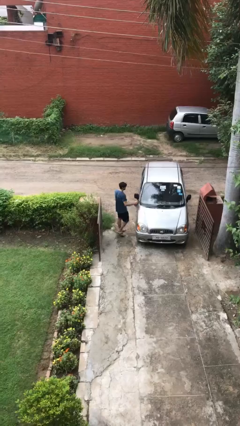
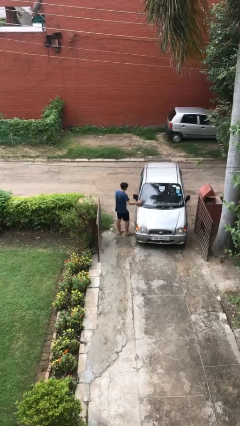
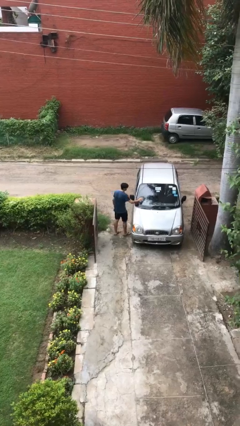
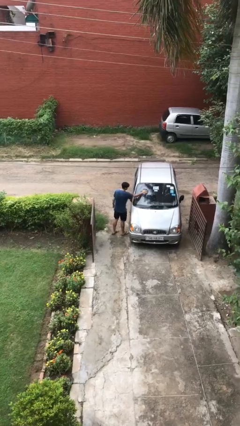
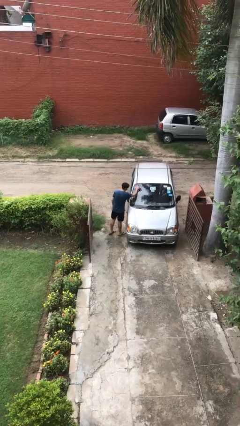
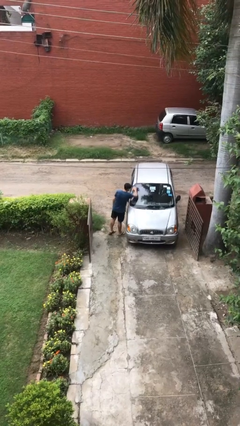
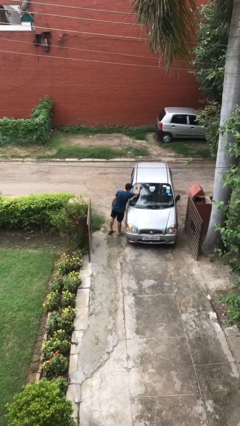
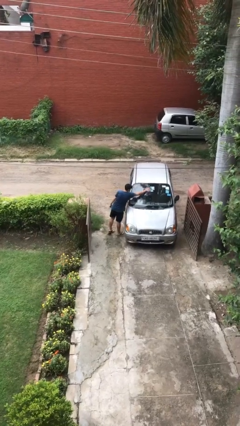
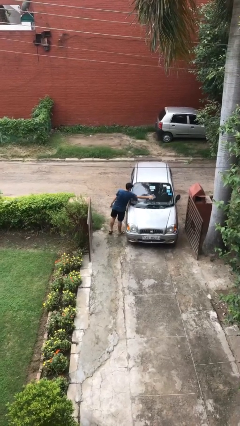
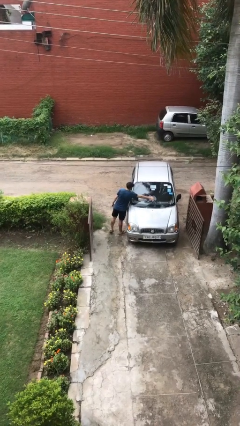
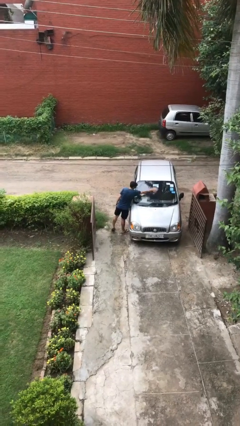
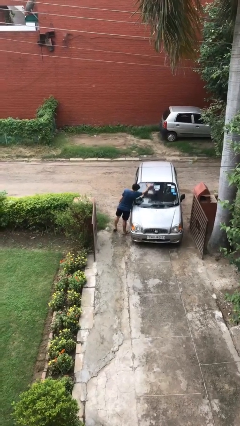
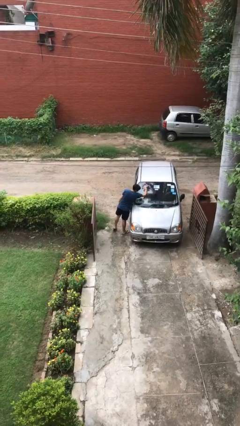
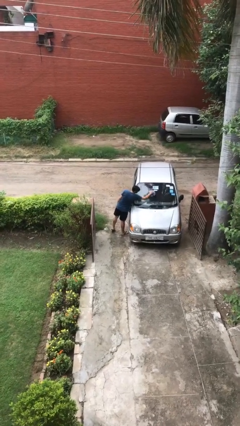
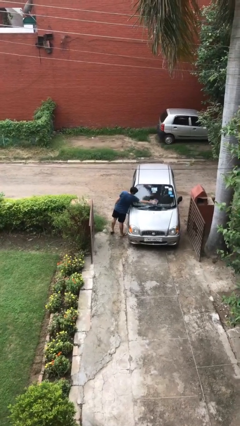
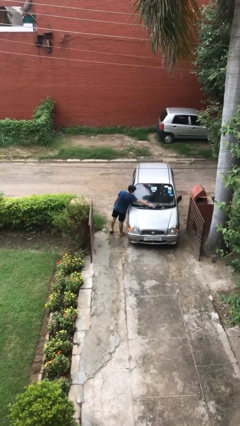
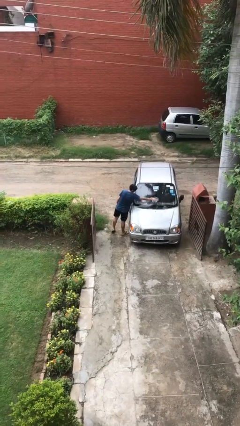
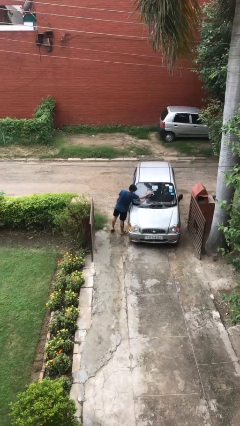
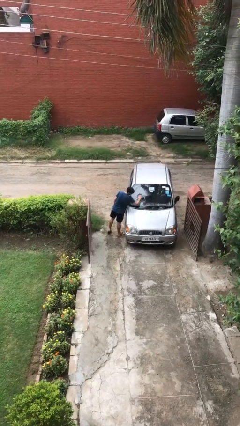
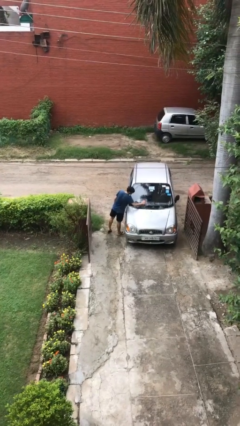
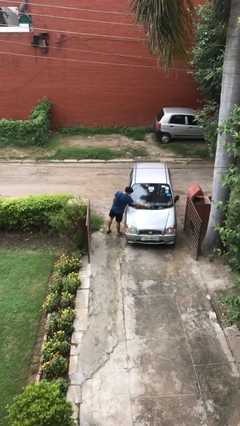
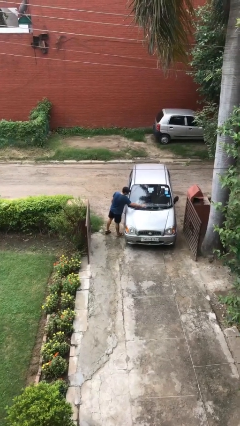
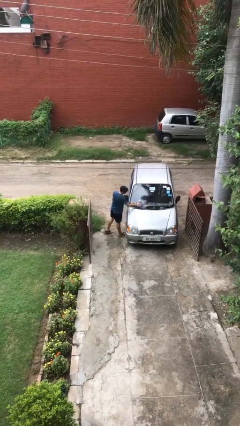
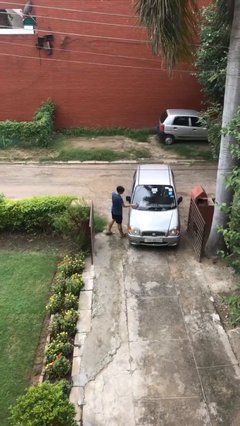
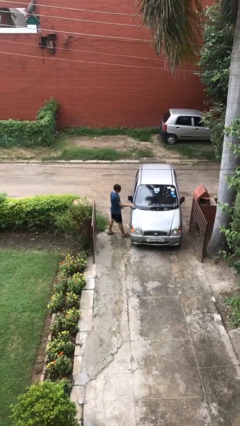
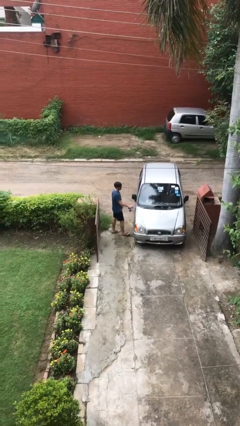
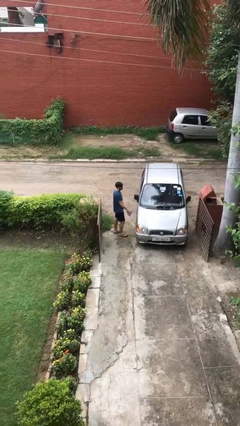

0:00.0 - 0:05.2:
person polishes car with rag

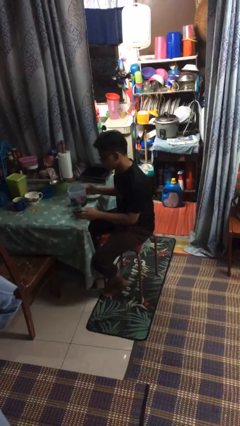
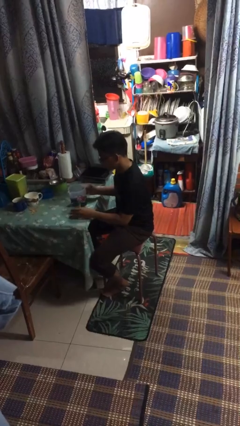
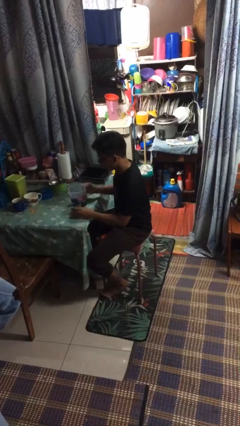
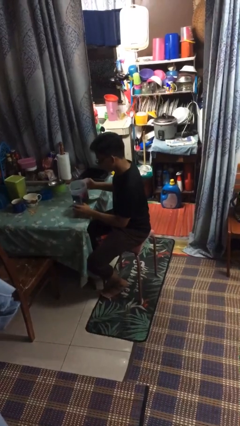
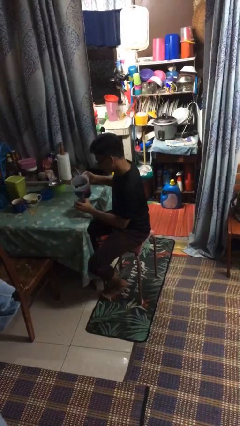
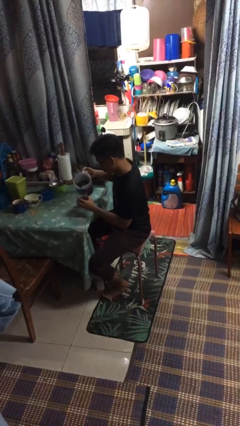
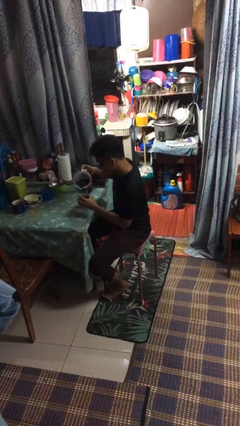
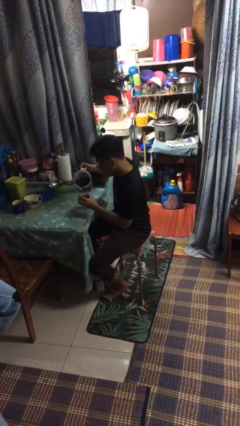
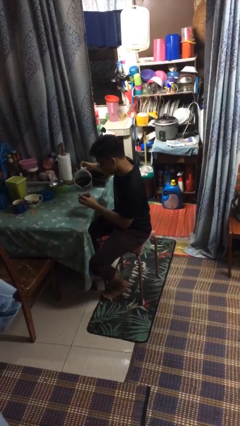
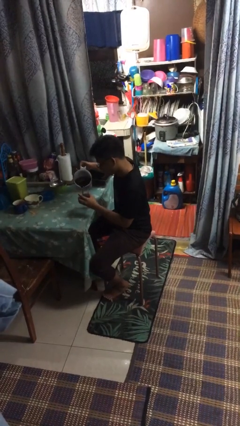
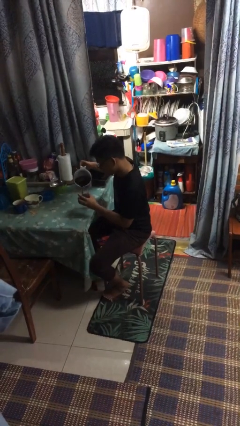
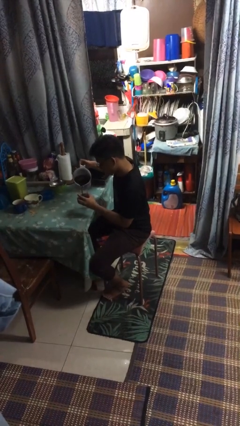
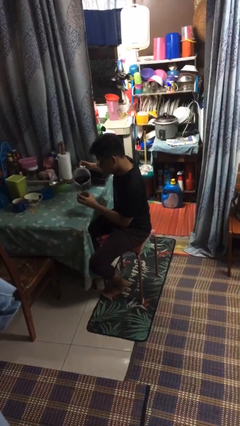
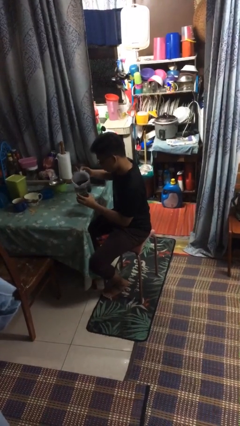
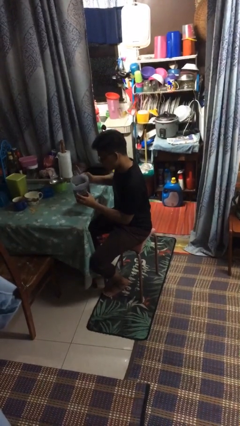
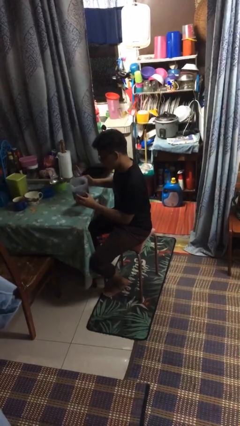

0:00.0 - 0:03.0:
person pours coffee into mug

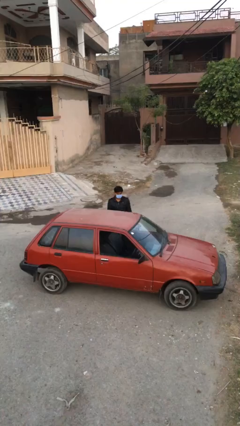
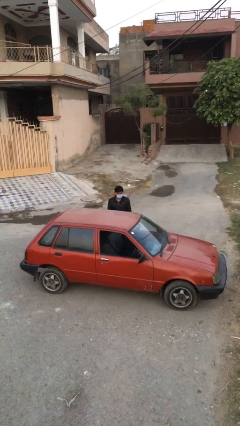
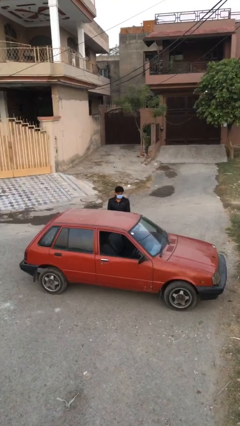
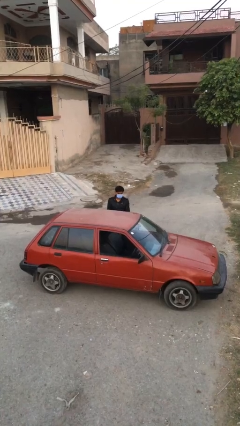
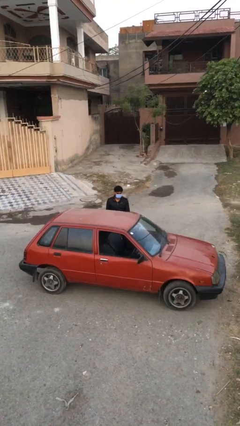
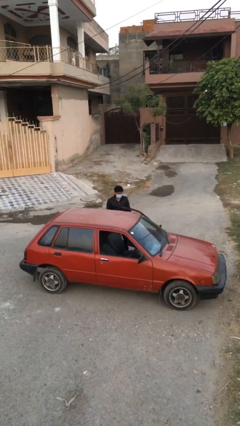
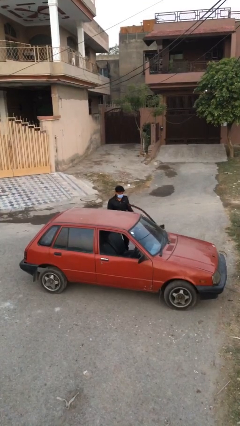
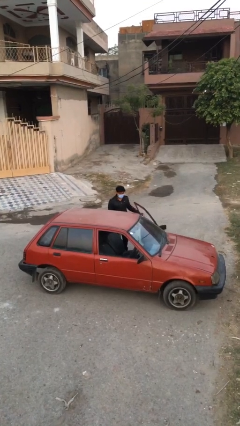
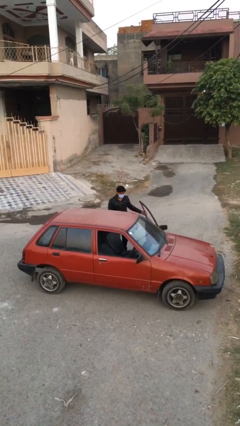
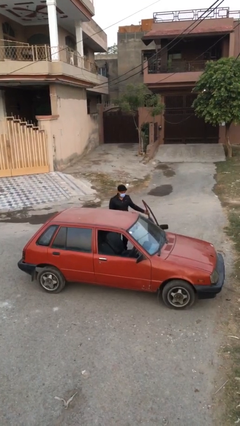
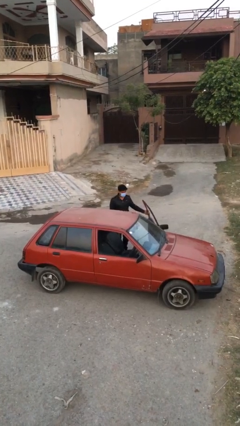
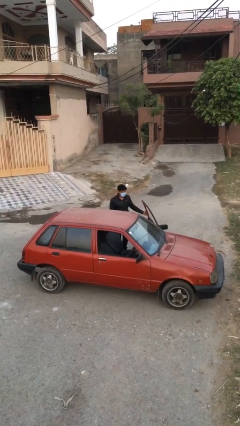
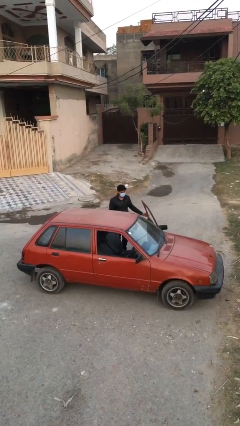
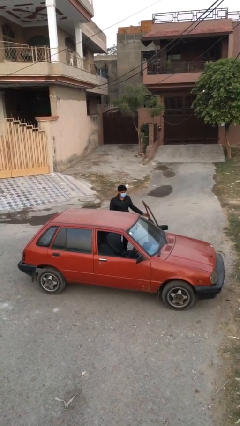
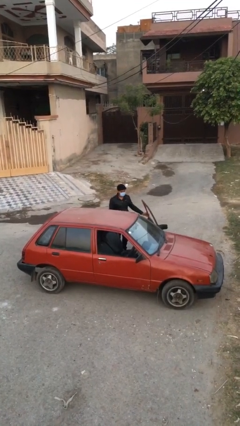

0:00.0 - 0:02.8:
person opens car door

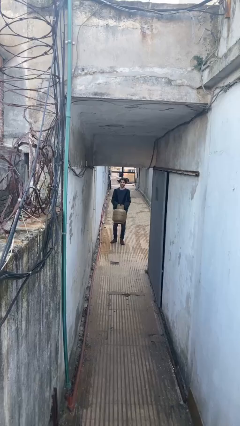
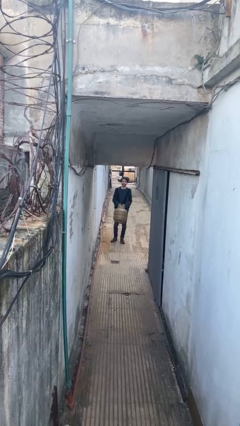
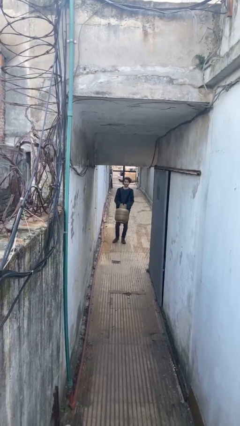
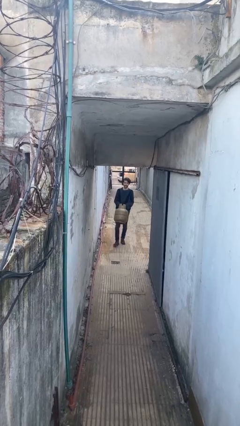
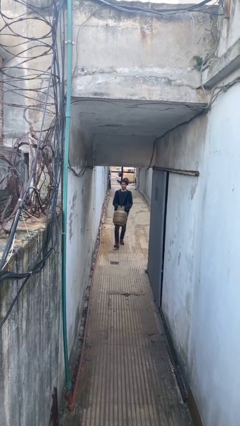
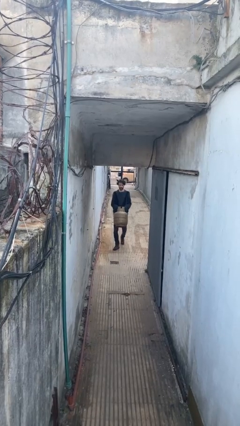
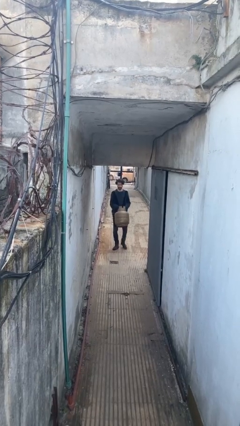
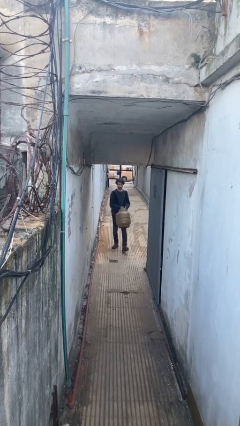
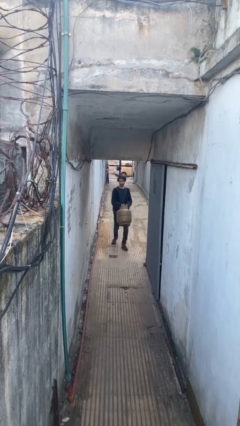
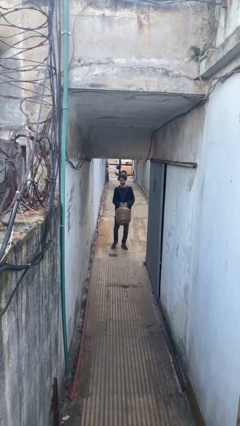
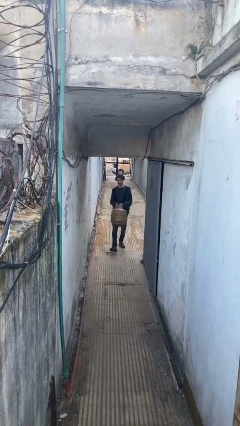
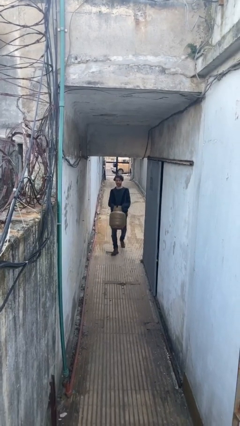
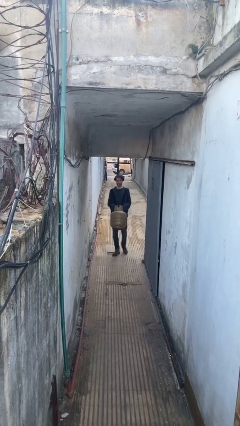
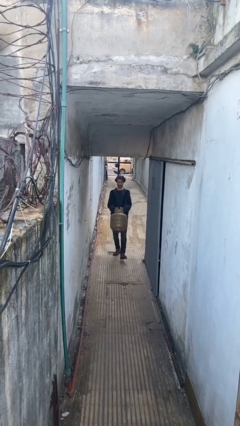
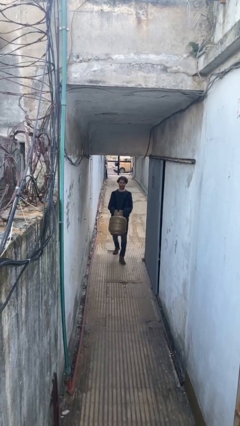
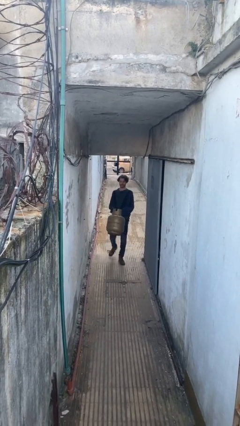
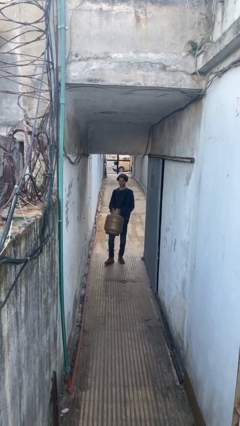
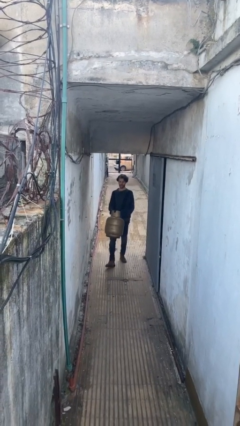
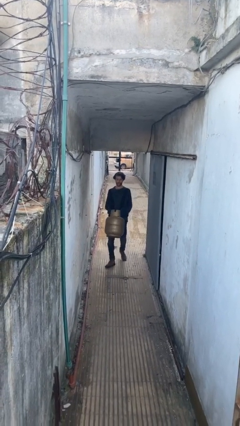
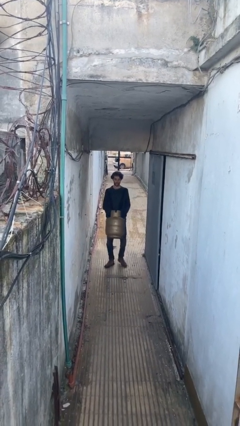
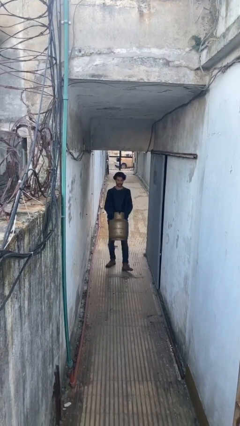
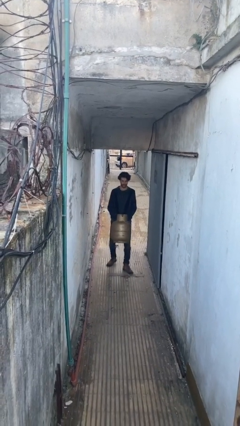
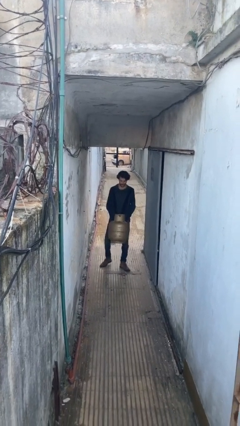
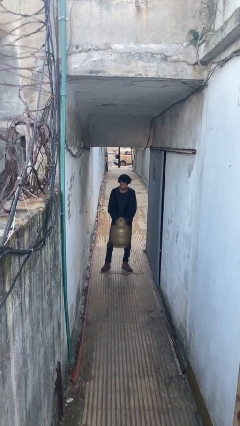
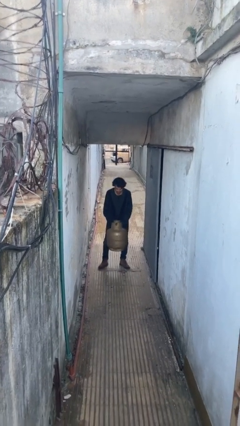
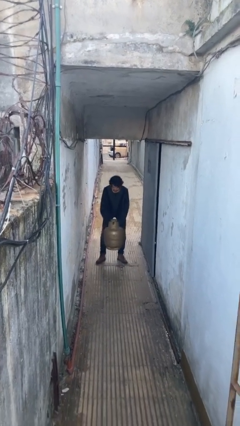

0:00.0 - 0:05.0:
person carries heavy object

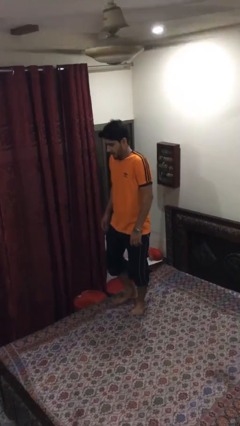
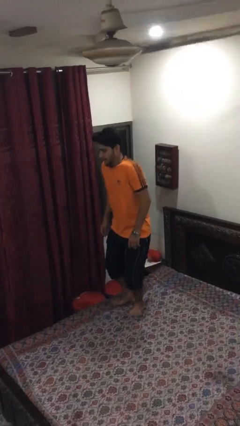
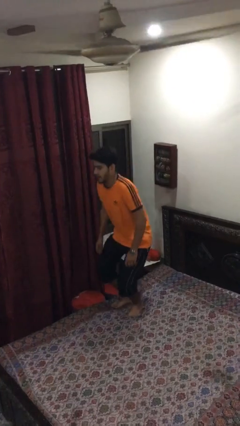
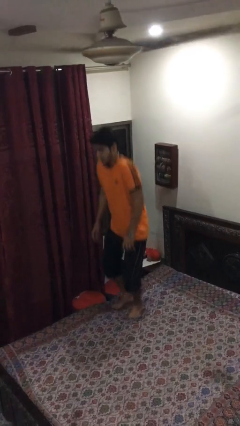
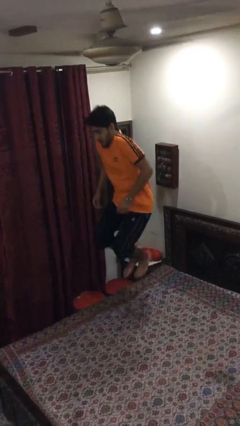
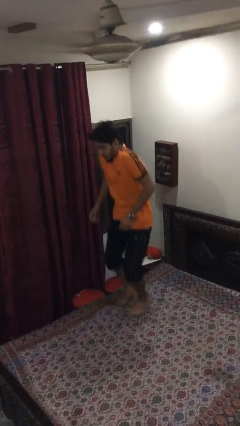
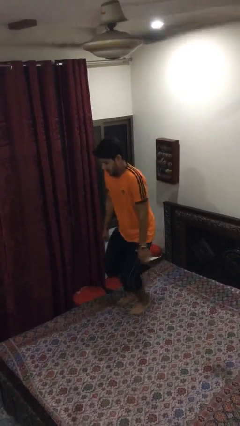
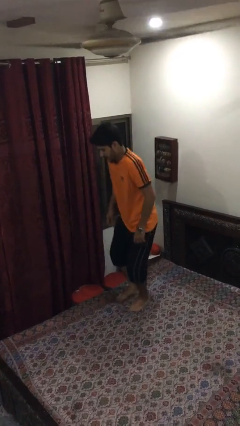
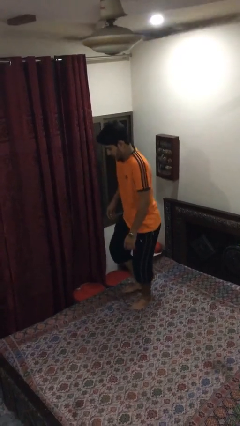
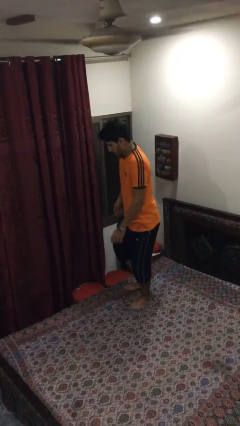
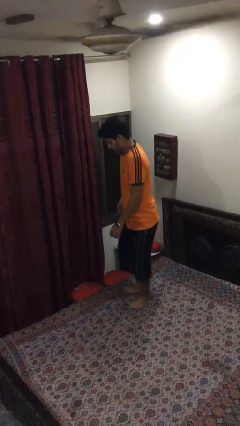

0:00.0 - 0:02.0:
person jumps on bed
